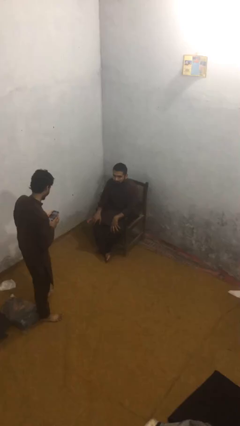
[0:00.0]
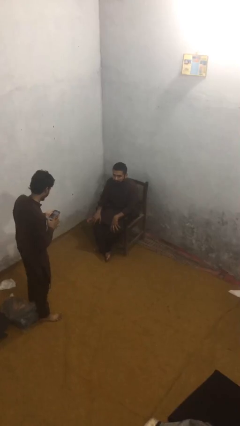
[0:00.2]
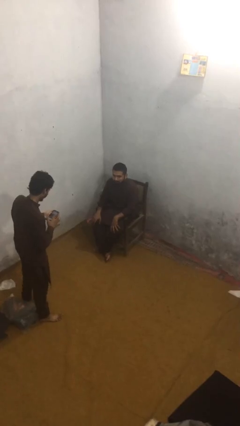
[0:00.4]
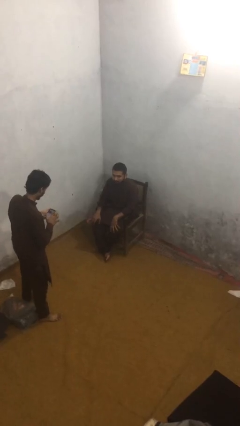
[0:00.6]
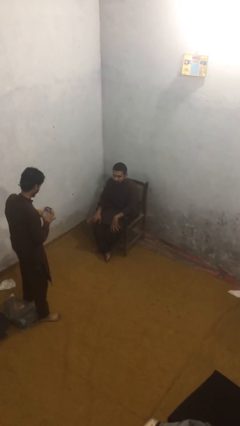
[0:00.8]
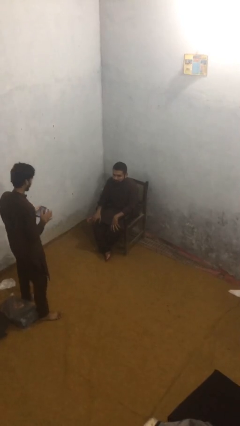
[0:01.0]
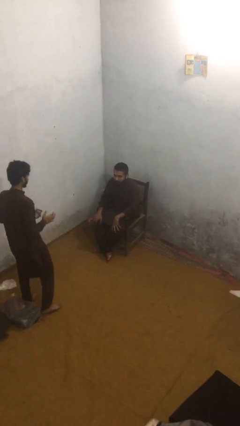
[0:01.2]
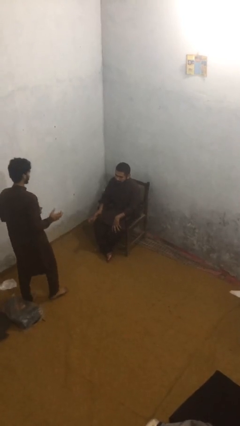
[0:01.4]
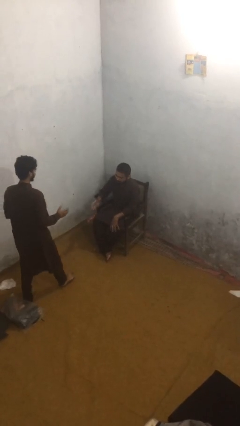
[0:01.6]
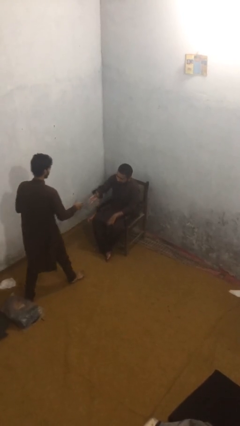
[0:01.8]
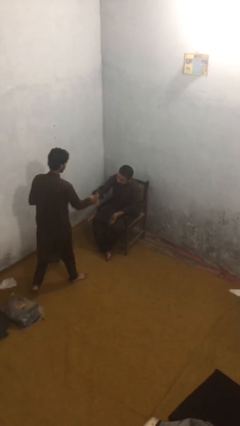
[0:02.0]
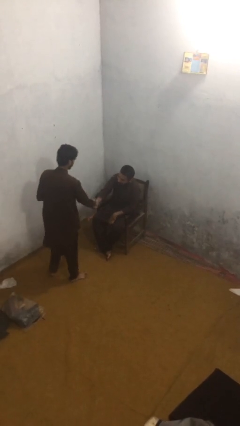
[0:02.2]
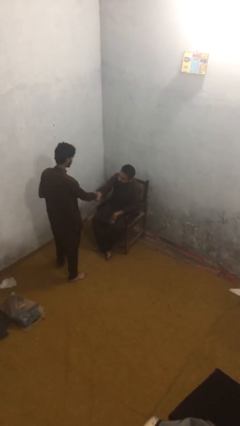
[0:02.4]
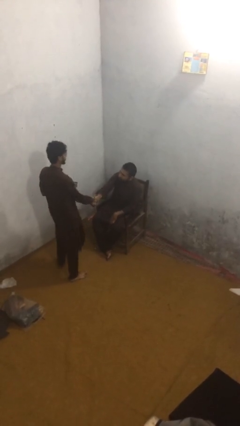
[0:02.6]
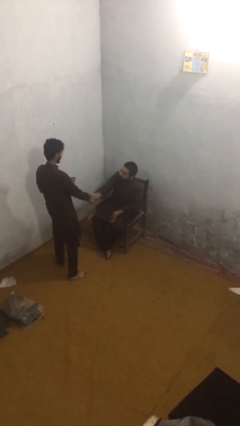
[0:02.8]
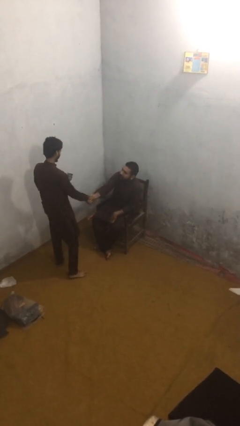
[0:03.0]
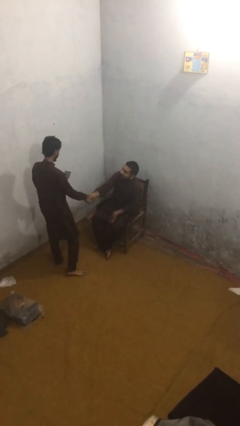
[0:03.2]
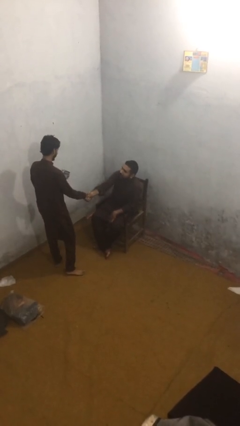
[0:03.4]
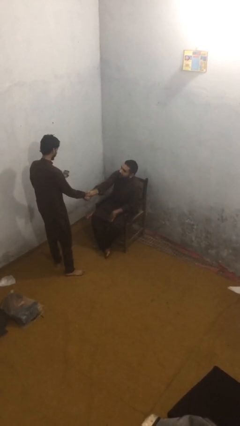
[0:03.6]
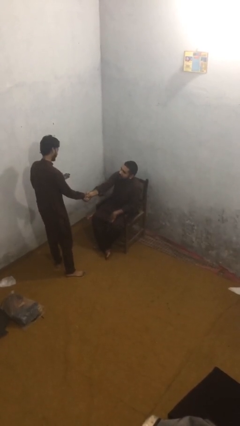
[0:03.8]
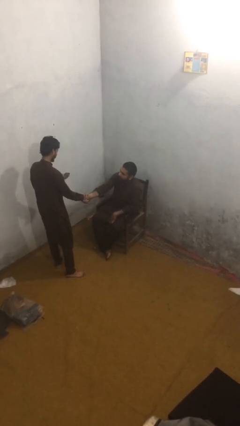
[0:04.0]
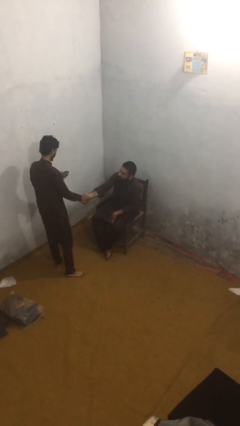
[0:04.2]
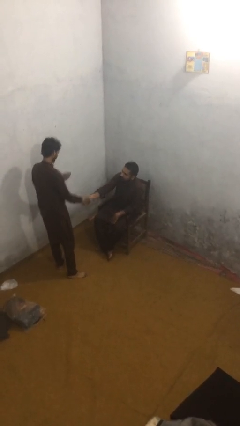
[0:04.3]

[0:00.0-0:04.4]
person shakes hand

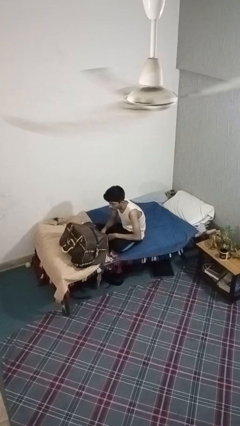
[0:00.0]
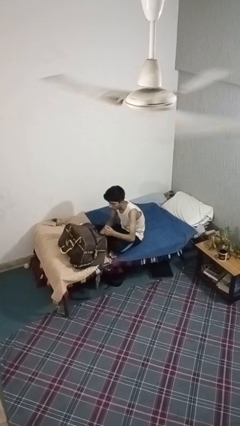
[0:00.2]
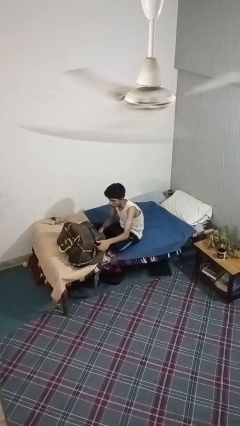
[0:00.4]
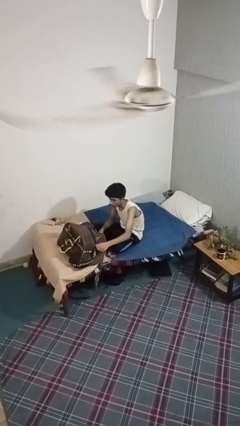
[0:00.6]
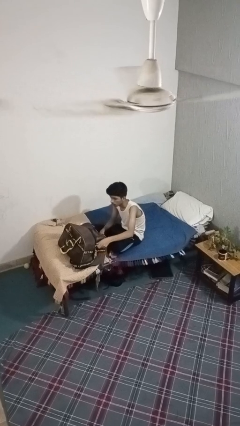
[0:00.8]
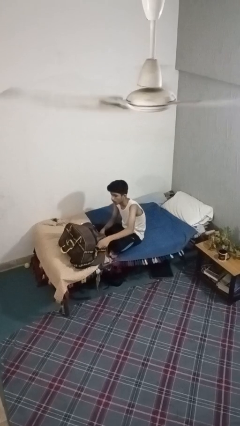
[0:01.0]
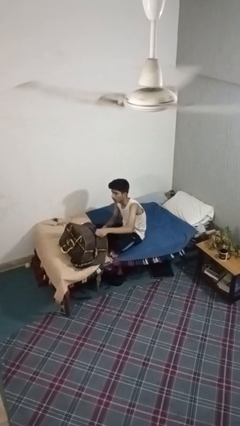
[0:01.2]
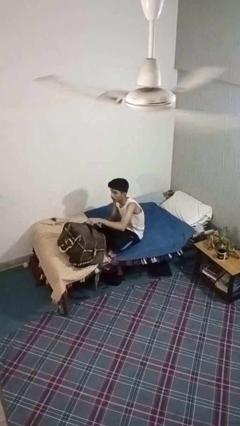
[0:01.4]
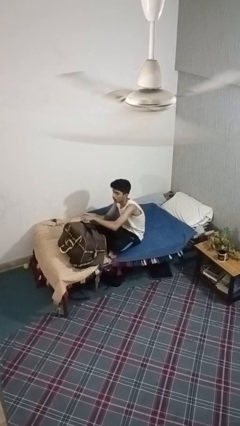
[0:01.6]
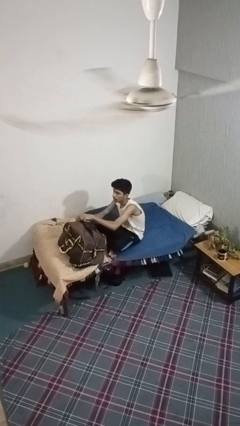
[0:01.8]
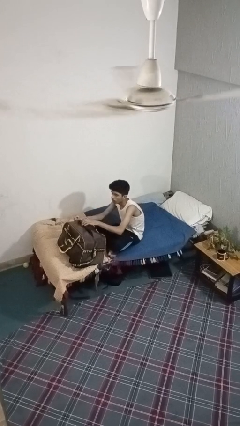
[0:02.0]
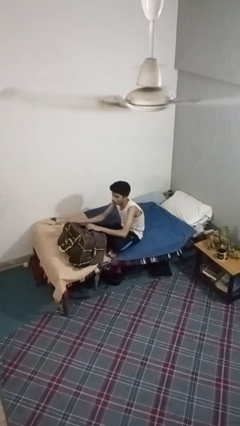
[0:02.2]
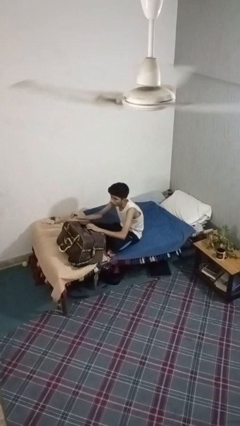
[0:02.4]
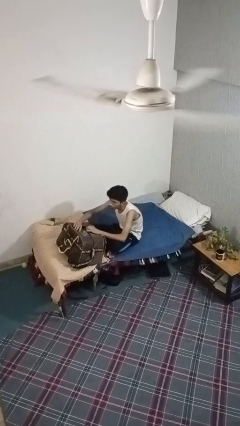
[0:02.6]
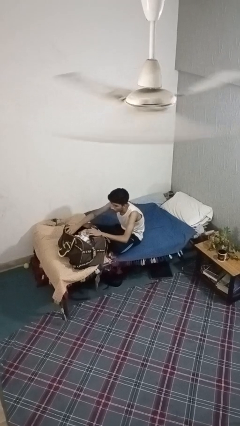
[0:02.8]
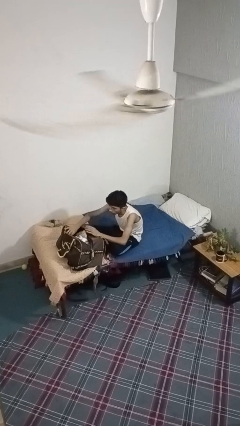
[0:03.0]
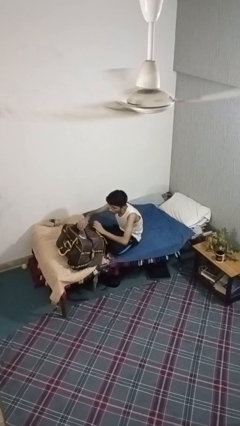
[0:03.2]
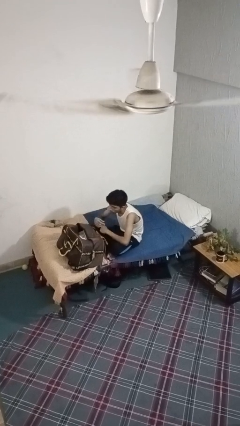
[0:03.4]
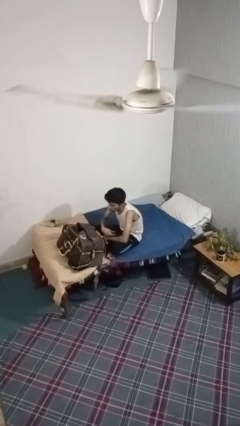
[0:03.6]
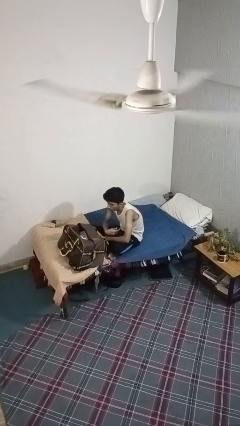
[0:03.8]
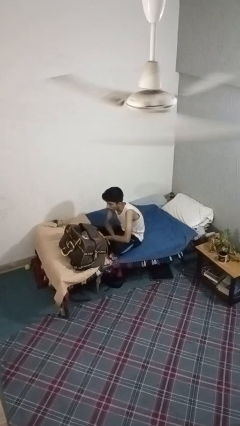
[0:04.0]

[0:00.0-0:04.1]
person opens suitcase

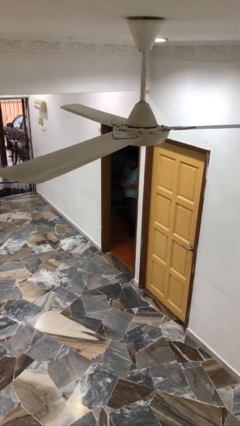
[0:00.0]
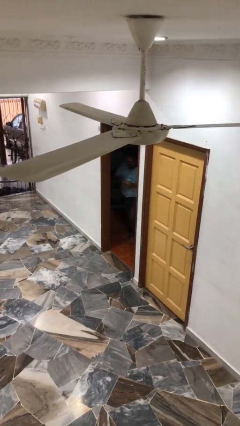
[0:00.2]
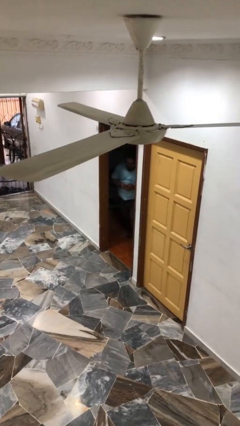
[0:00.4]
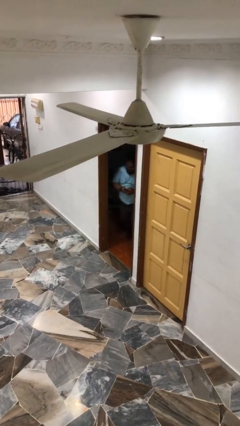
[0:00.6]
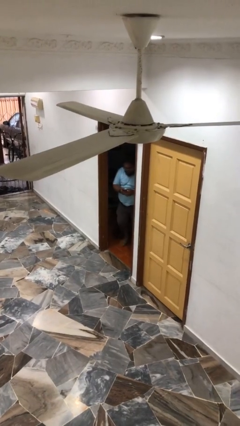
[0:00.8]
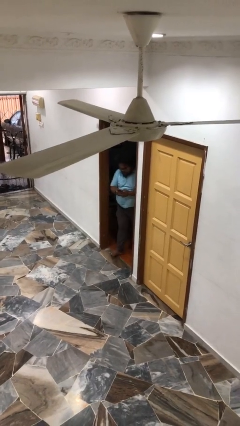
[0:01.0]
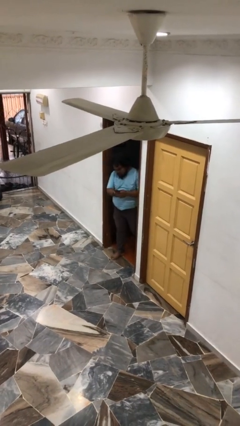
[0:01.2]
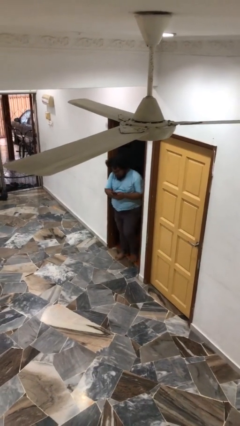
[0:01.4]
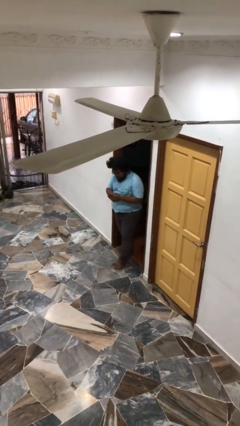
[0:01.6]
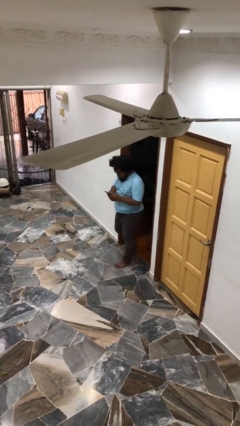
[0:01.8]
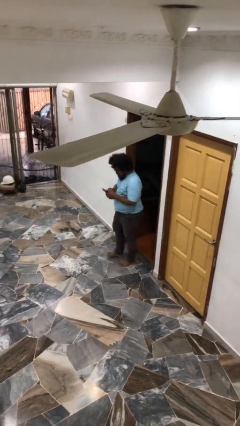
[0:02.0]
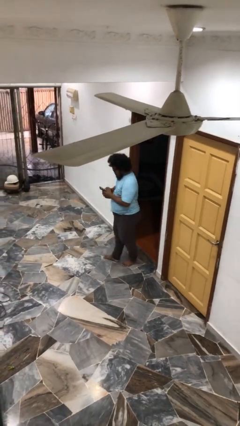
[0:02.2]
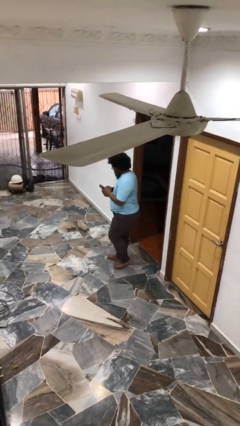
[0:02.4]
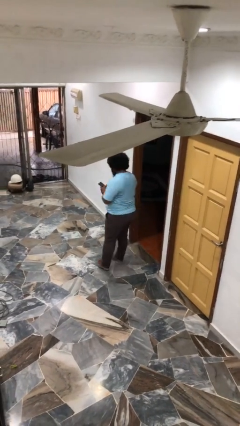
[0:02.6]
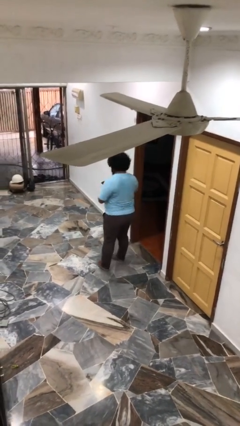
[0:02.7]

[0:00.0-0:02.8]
person enters scene through structure

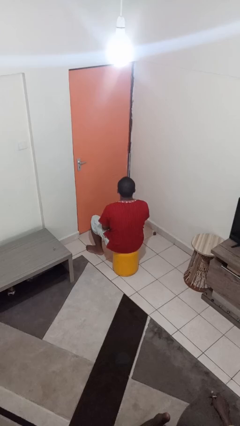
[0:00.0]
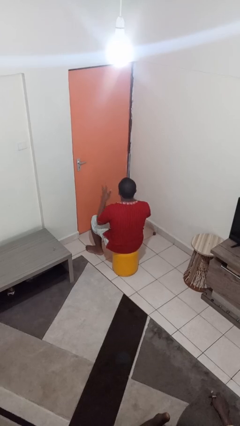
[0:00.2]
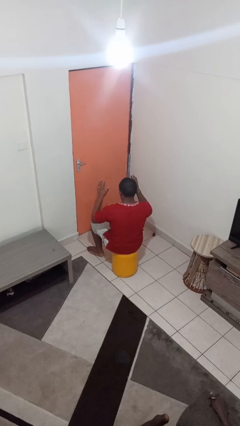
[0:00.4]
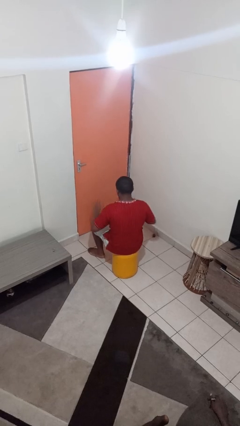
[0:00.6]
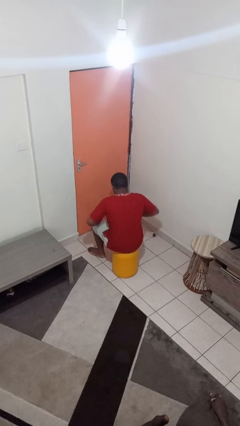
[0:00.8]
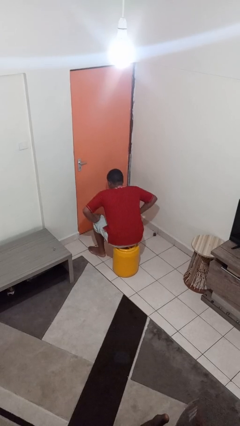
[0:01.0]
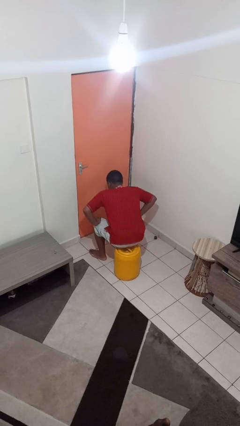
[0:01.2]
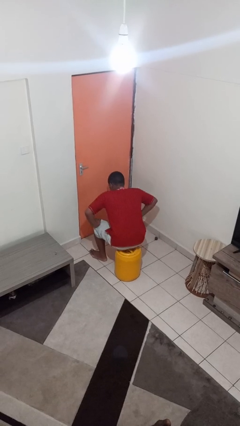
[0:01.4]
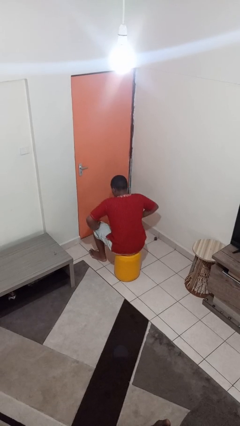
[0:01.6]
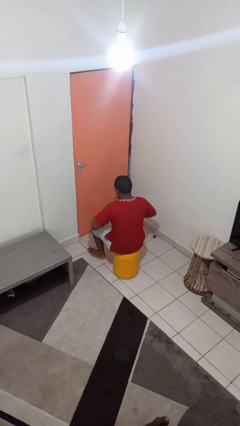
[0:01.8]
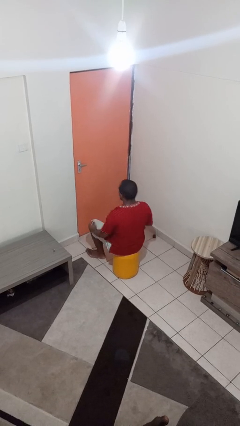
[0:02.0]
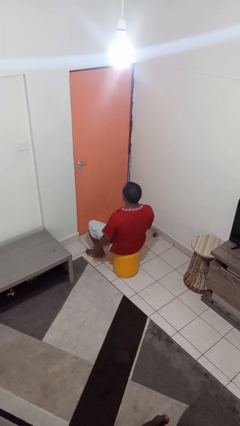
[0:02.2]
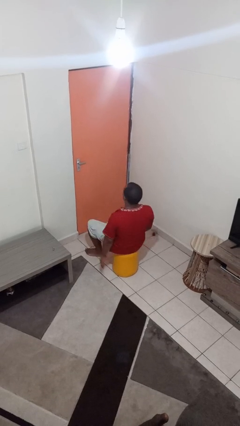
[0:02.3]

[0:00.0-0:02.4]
person slaps hands on thighs

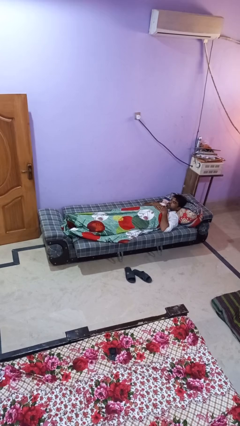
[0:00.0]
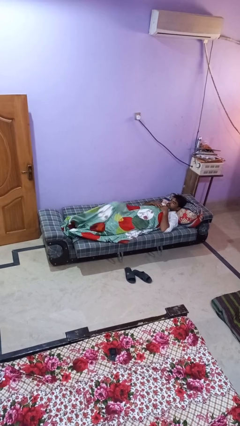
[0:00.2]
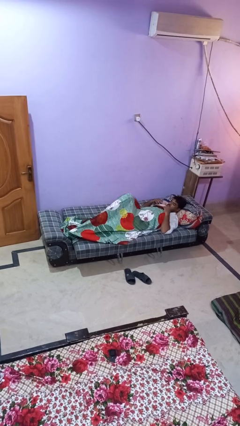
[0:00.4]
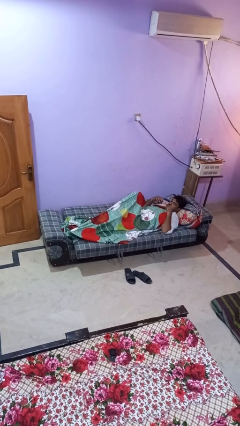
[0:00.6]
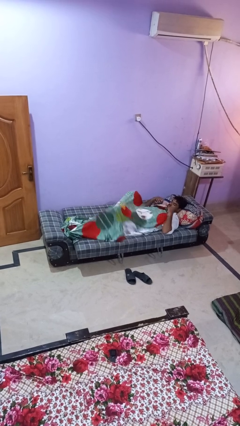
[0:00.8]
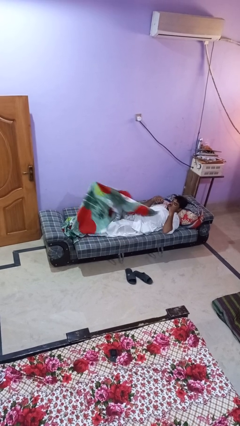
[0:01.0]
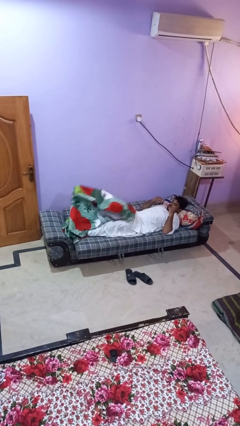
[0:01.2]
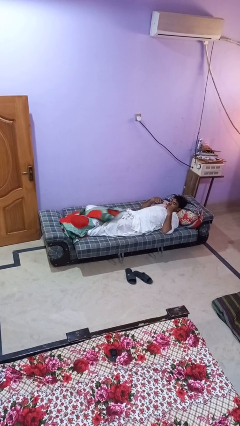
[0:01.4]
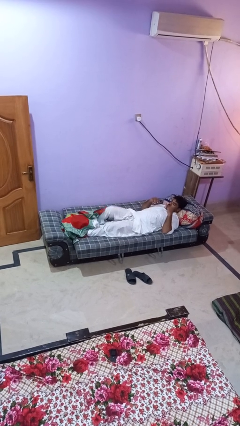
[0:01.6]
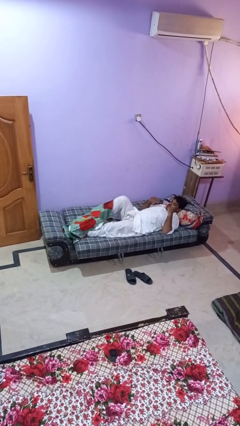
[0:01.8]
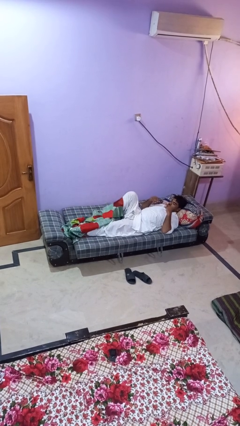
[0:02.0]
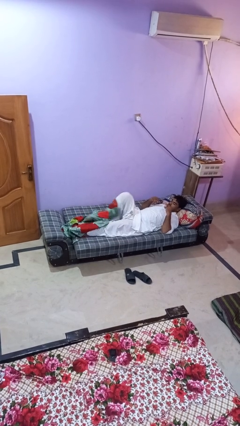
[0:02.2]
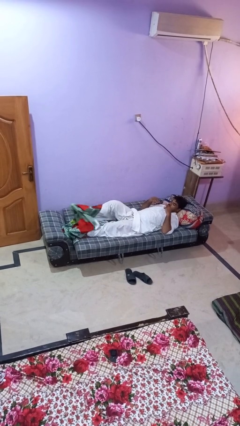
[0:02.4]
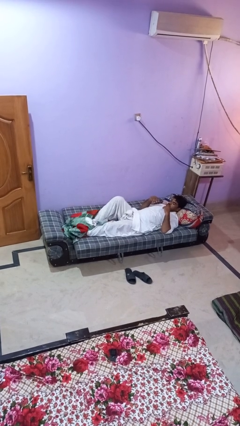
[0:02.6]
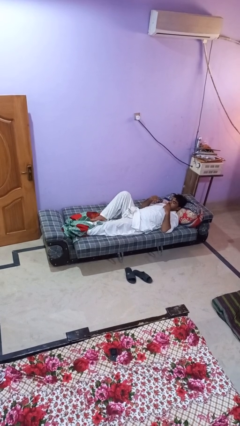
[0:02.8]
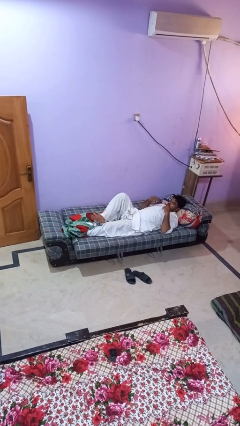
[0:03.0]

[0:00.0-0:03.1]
person uncovers with bedsheets

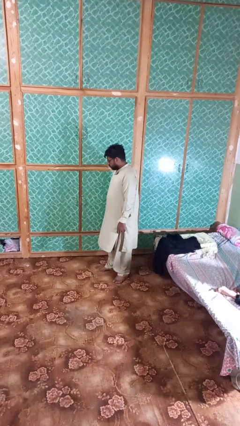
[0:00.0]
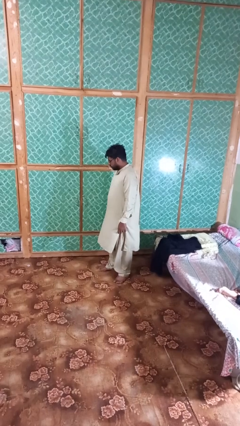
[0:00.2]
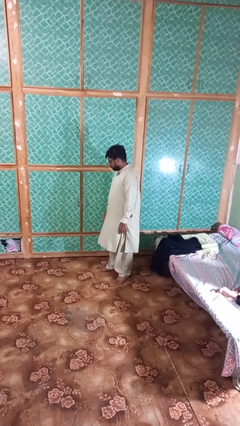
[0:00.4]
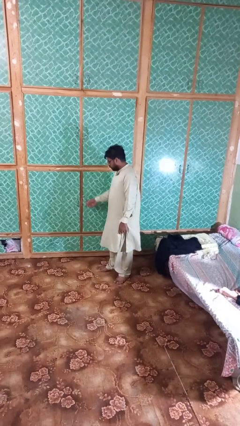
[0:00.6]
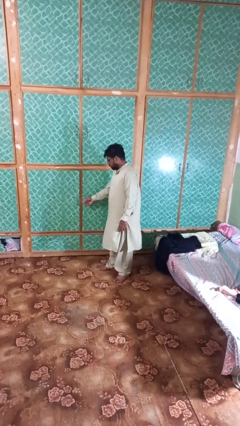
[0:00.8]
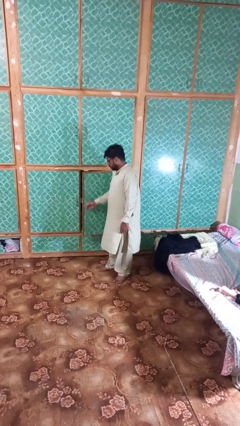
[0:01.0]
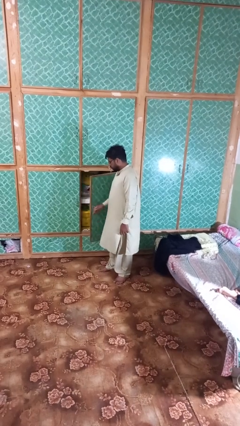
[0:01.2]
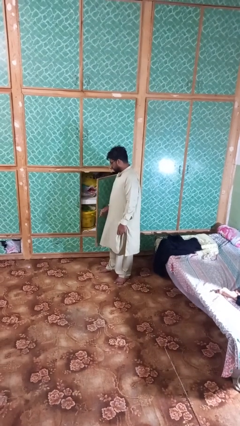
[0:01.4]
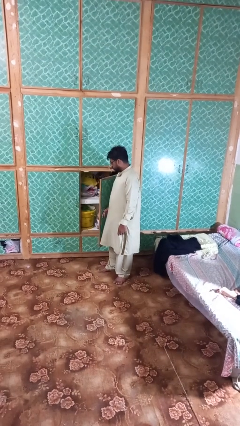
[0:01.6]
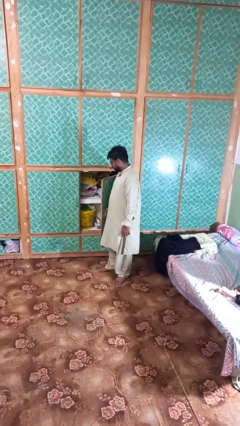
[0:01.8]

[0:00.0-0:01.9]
person opens closet door
